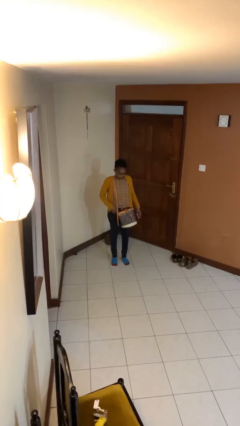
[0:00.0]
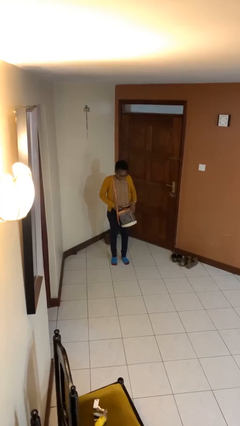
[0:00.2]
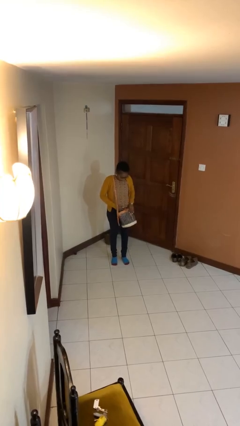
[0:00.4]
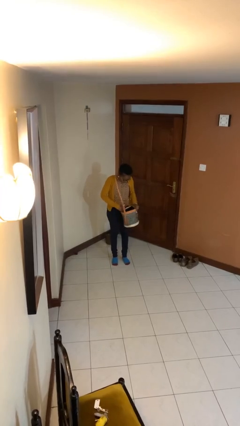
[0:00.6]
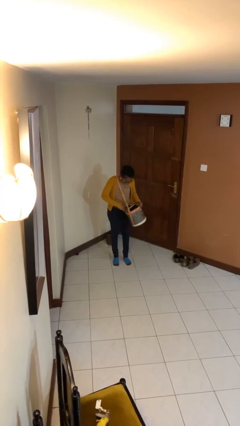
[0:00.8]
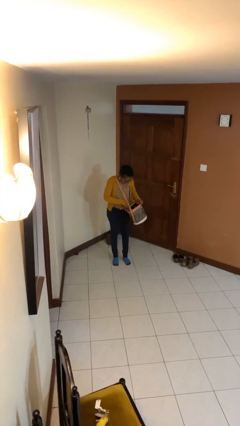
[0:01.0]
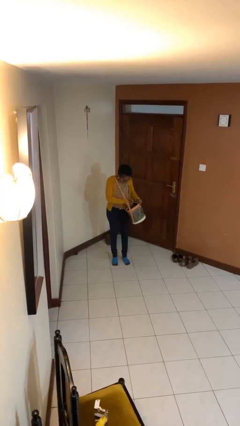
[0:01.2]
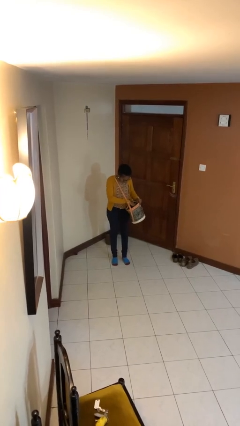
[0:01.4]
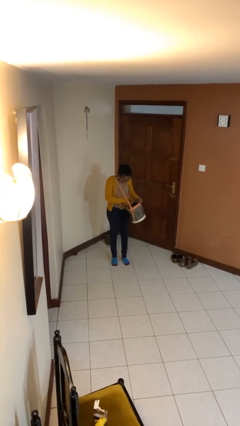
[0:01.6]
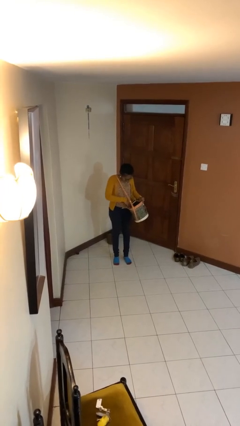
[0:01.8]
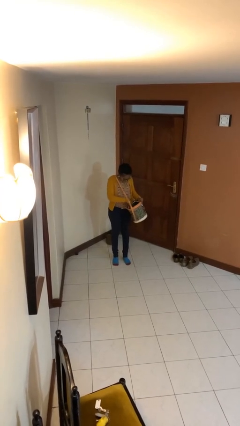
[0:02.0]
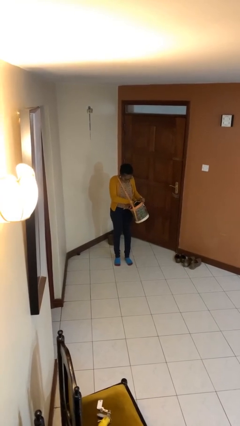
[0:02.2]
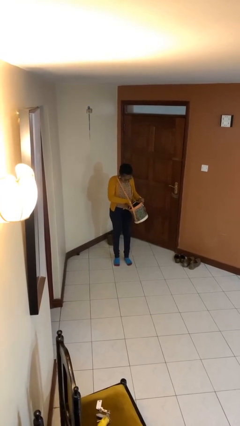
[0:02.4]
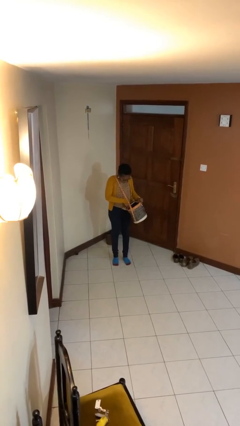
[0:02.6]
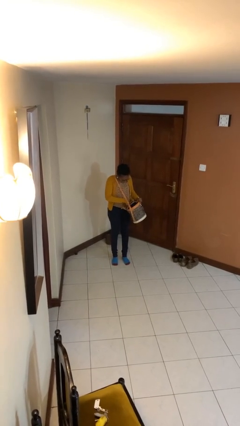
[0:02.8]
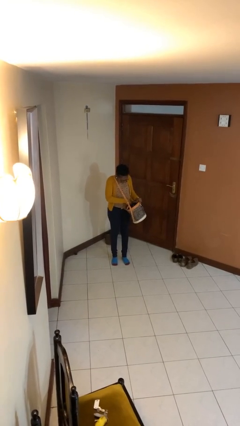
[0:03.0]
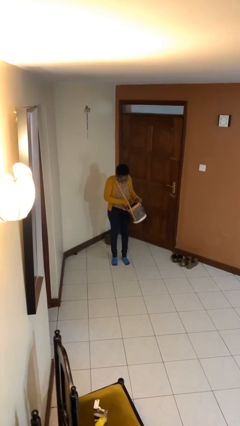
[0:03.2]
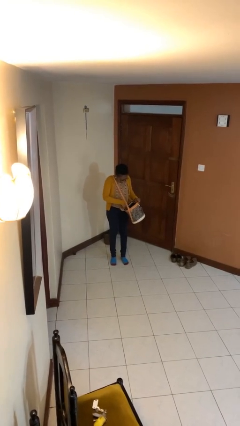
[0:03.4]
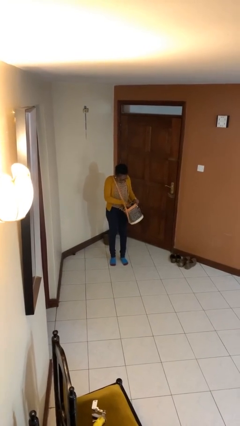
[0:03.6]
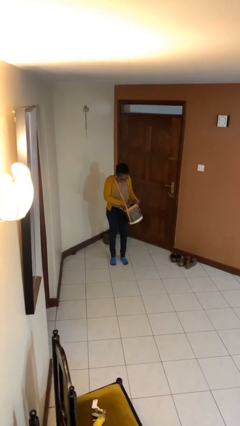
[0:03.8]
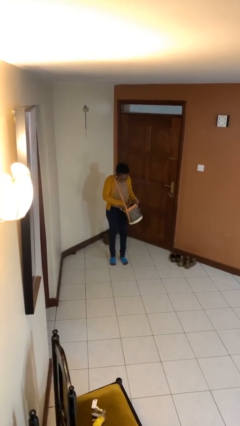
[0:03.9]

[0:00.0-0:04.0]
person searches in purse

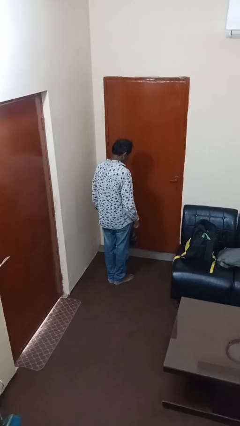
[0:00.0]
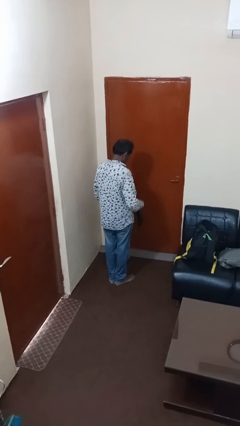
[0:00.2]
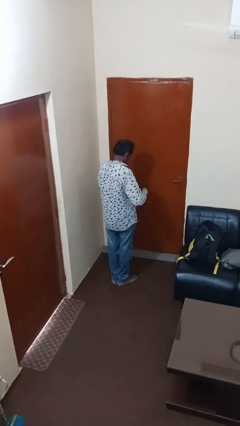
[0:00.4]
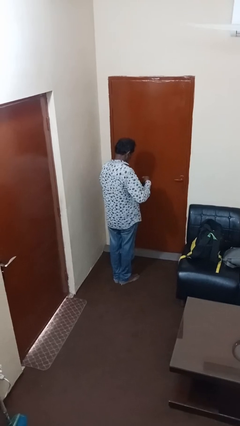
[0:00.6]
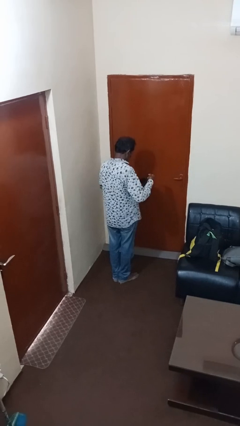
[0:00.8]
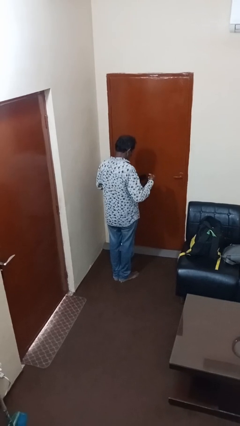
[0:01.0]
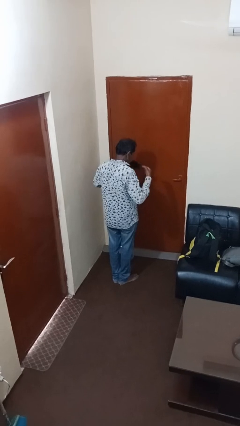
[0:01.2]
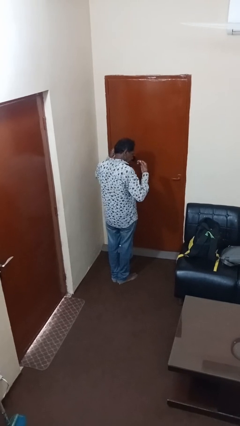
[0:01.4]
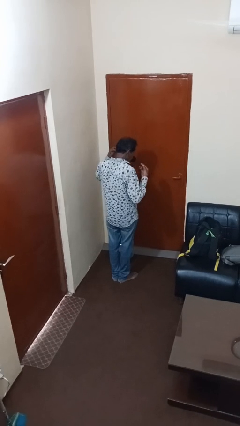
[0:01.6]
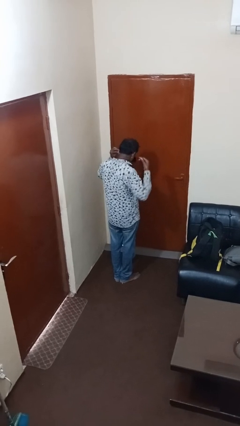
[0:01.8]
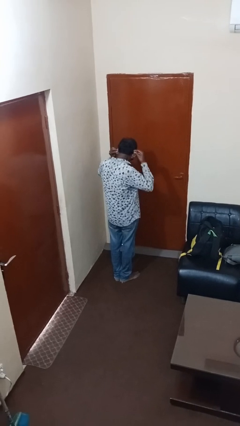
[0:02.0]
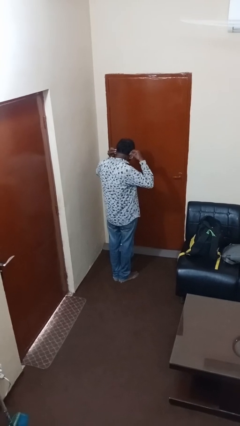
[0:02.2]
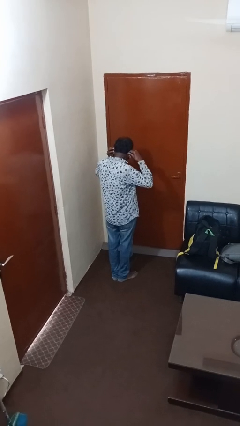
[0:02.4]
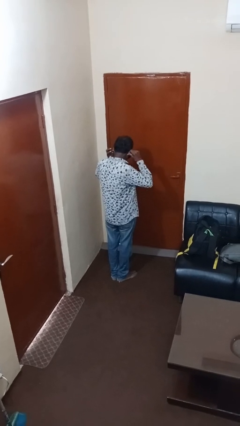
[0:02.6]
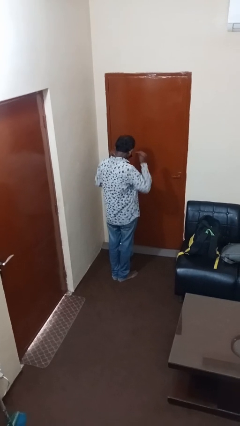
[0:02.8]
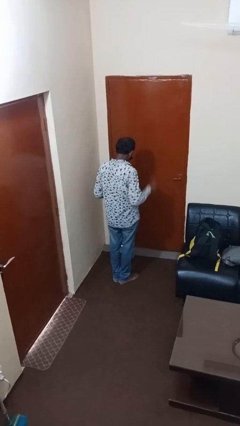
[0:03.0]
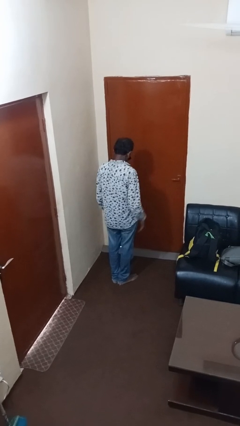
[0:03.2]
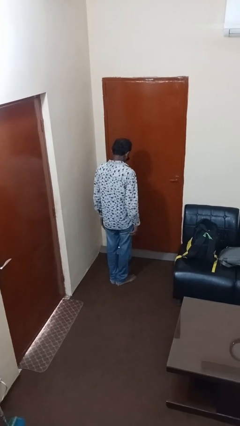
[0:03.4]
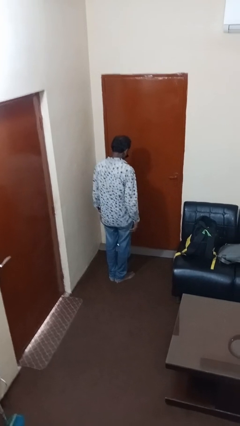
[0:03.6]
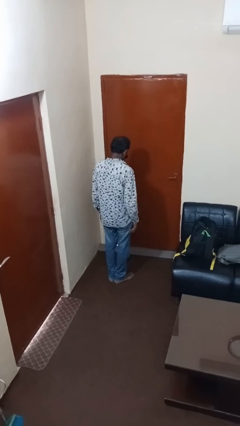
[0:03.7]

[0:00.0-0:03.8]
person puts on facemask

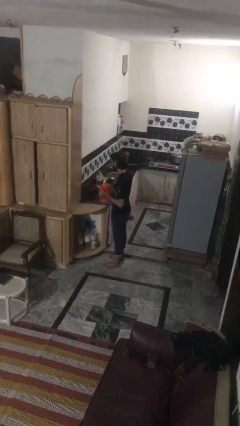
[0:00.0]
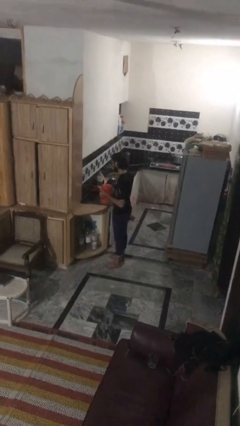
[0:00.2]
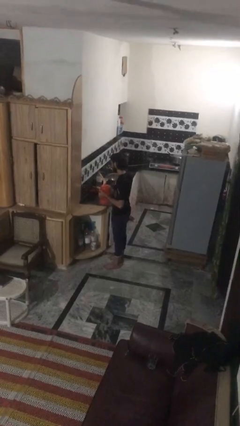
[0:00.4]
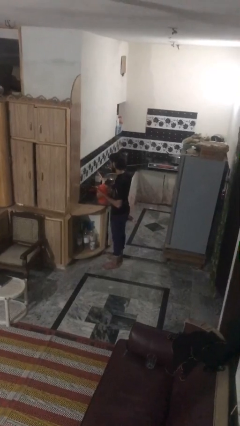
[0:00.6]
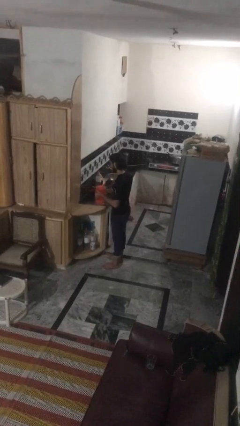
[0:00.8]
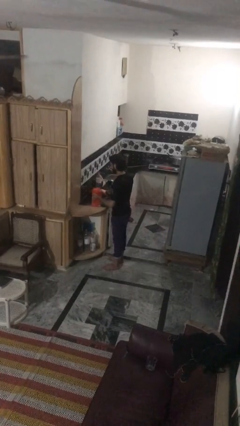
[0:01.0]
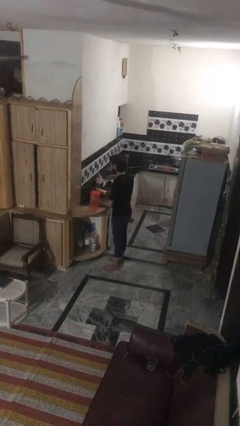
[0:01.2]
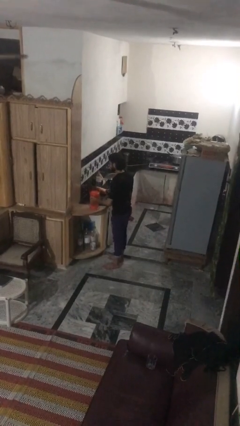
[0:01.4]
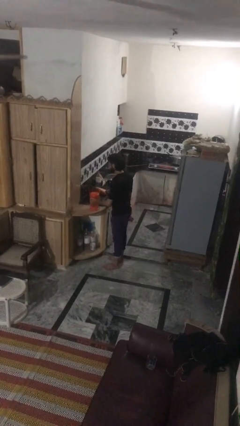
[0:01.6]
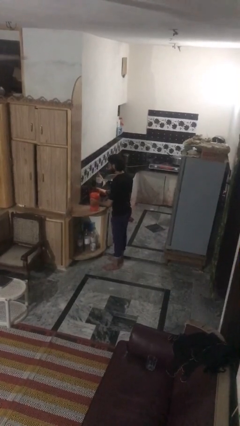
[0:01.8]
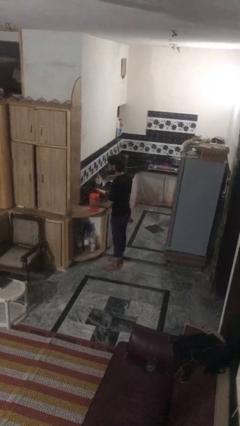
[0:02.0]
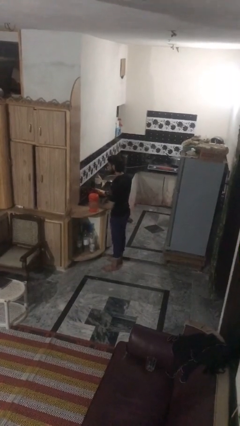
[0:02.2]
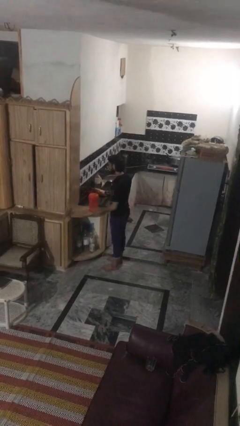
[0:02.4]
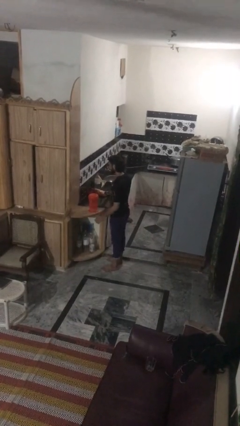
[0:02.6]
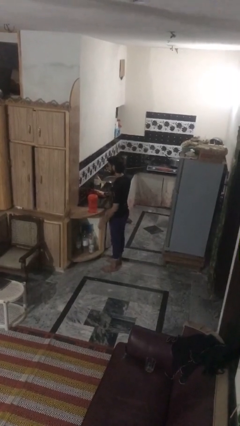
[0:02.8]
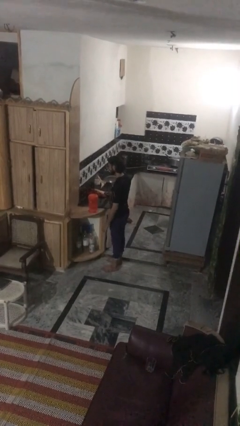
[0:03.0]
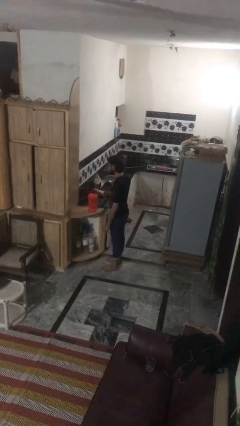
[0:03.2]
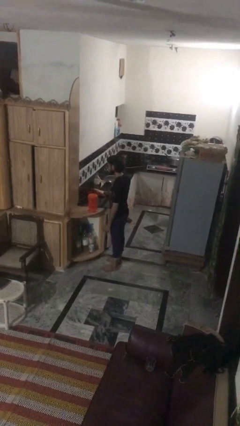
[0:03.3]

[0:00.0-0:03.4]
person puts down object on countertop

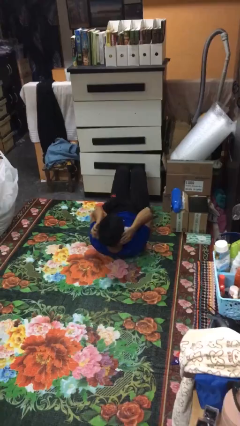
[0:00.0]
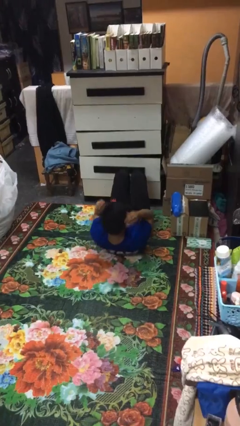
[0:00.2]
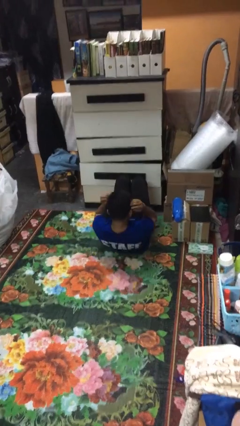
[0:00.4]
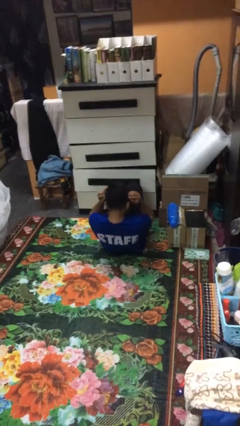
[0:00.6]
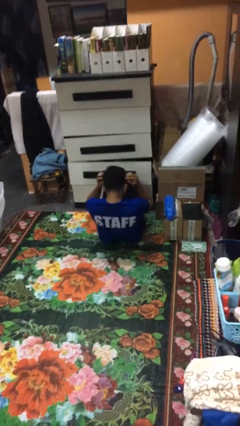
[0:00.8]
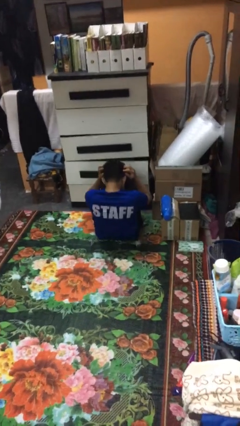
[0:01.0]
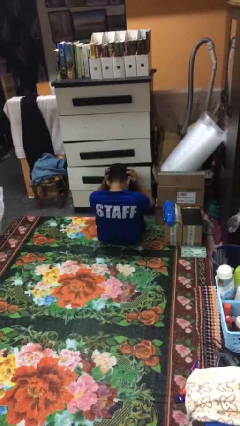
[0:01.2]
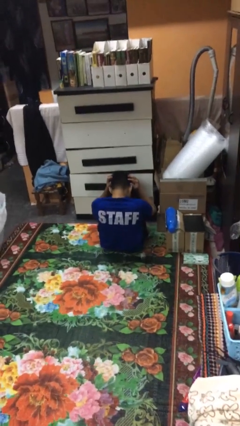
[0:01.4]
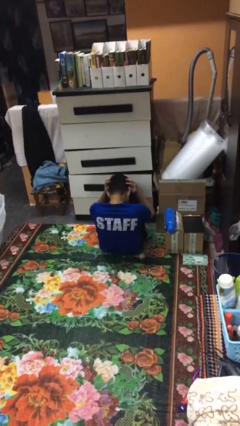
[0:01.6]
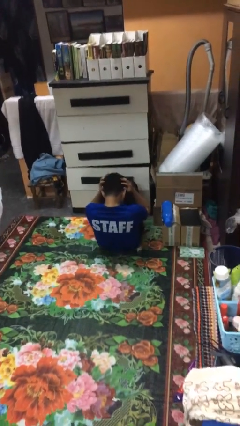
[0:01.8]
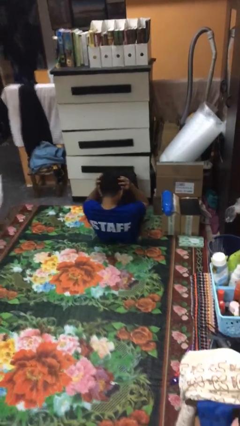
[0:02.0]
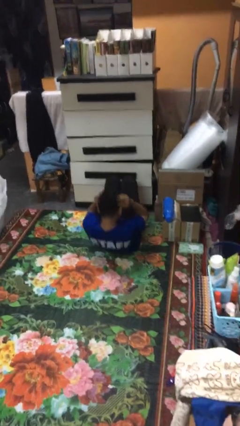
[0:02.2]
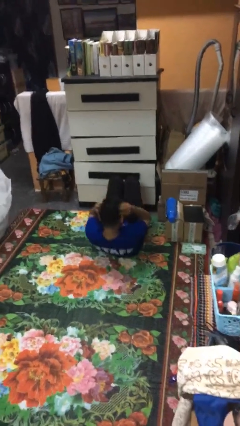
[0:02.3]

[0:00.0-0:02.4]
person exercises with situp

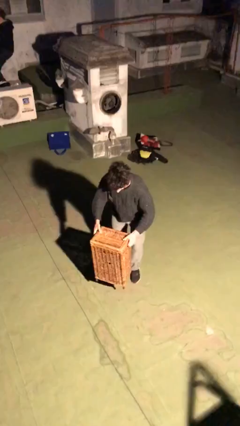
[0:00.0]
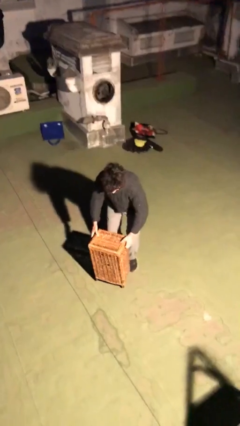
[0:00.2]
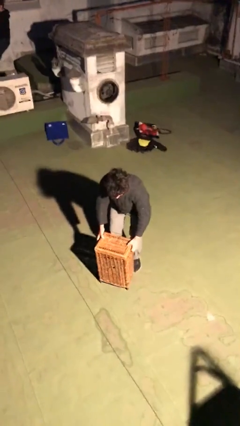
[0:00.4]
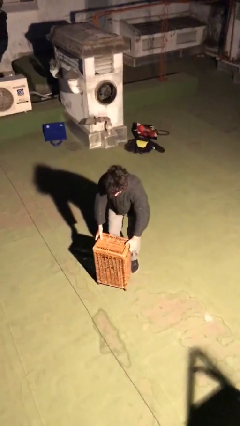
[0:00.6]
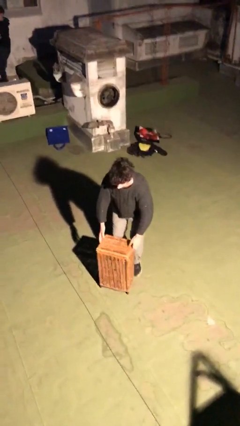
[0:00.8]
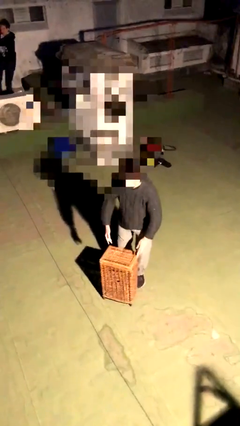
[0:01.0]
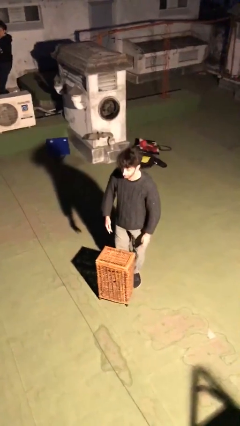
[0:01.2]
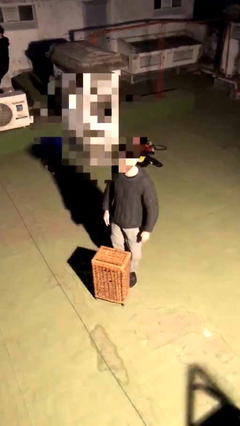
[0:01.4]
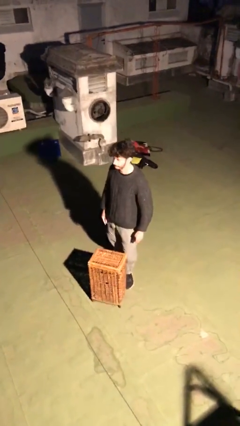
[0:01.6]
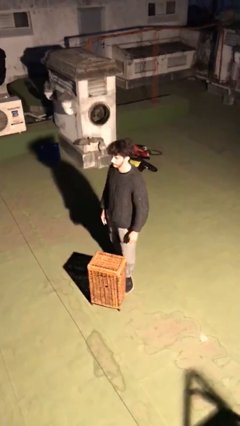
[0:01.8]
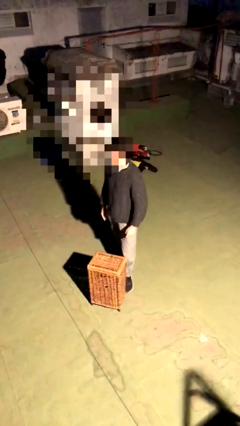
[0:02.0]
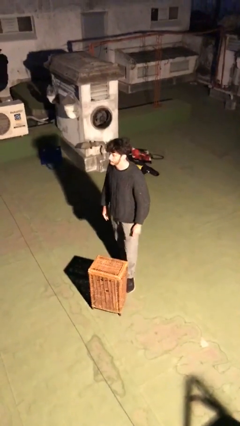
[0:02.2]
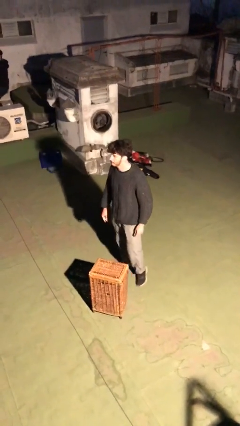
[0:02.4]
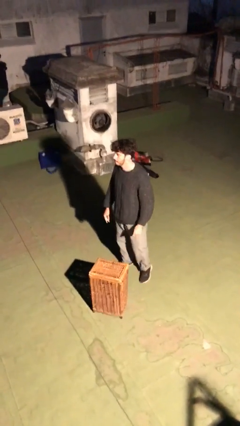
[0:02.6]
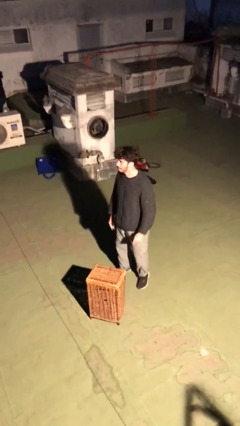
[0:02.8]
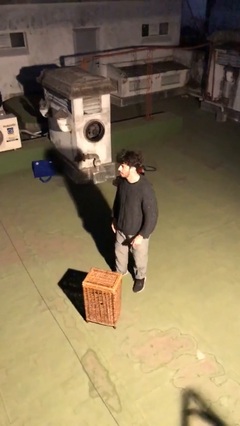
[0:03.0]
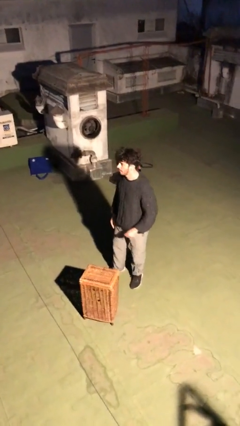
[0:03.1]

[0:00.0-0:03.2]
person puts down object on floor

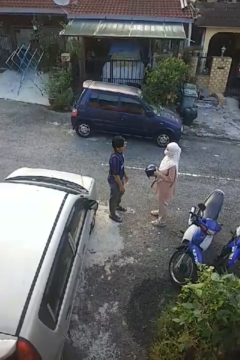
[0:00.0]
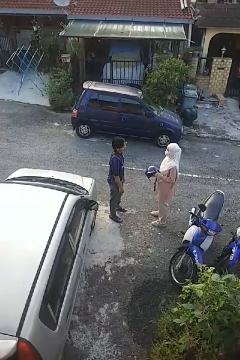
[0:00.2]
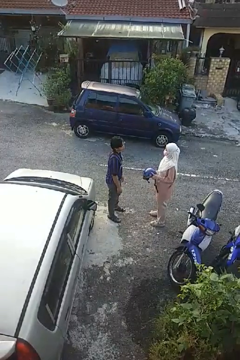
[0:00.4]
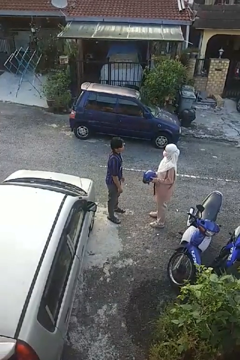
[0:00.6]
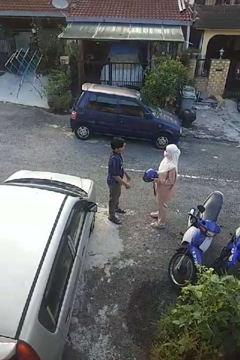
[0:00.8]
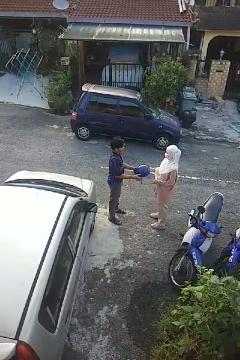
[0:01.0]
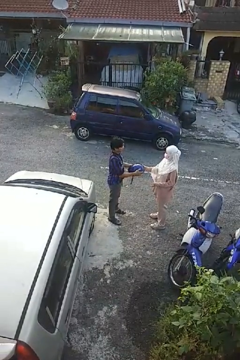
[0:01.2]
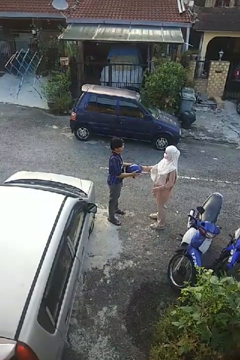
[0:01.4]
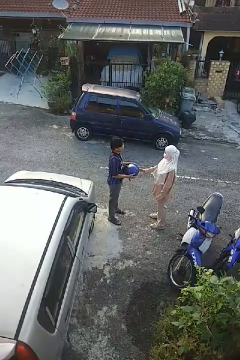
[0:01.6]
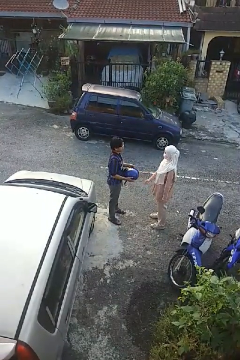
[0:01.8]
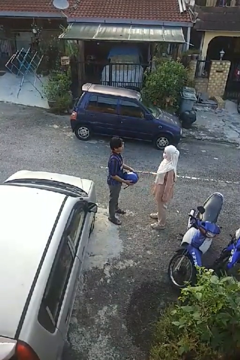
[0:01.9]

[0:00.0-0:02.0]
person transfers object to person
